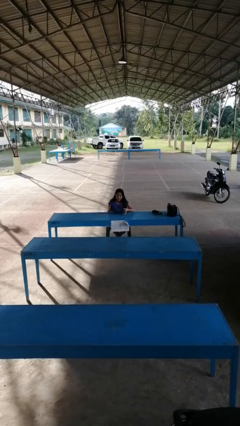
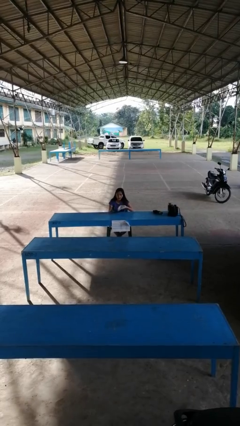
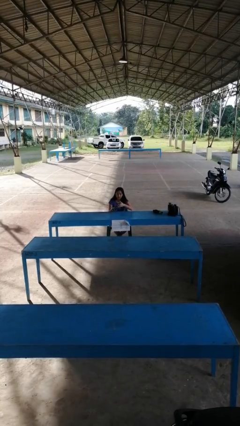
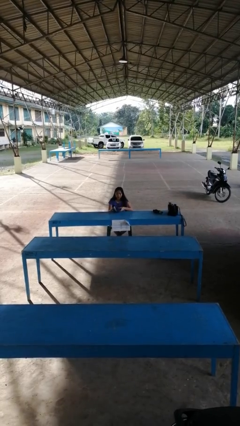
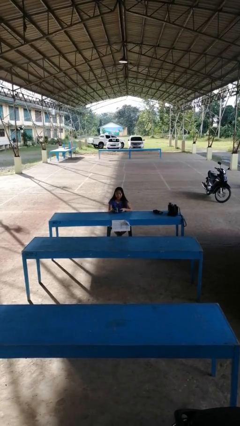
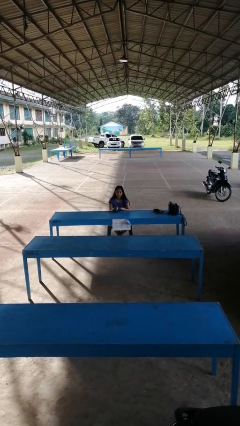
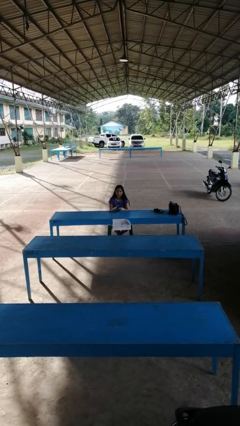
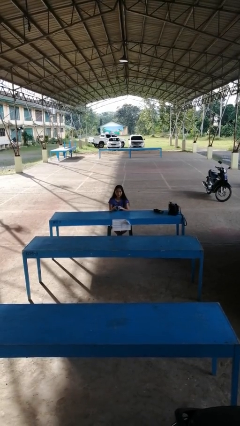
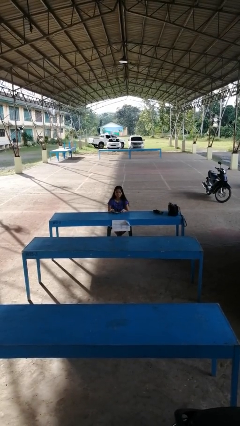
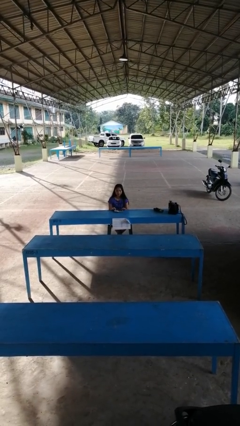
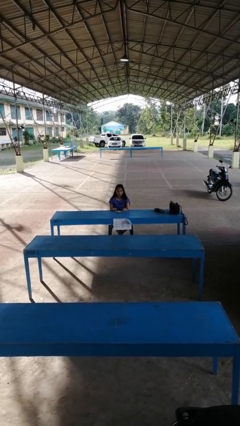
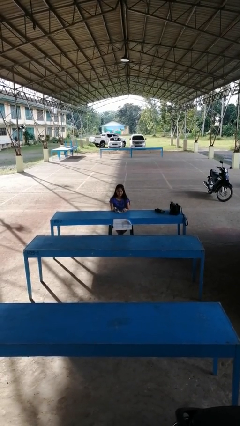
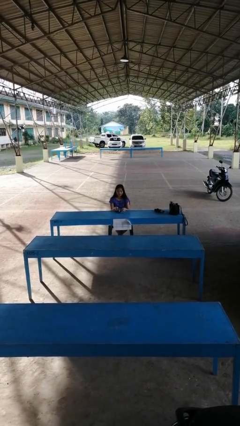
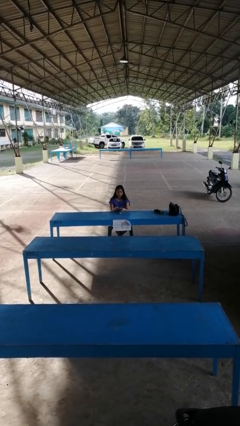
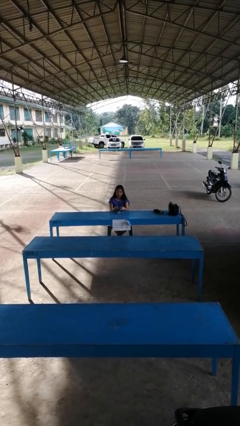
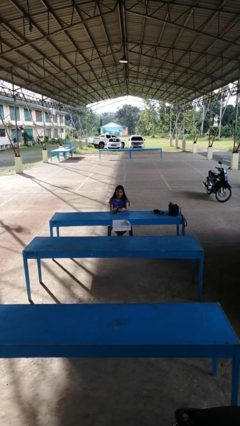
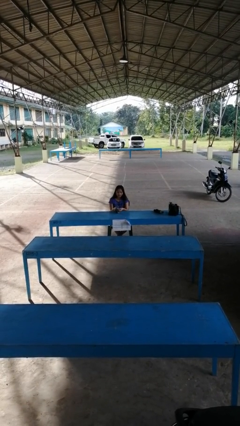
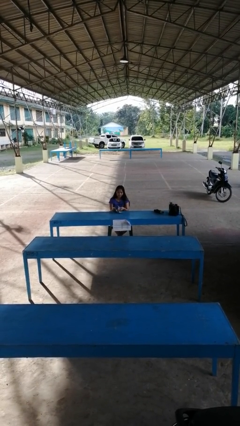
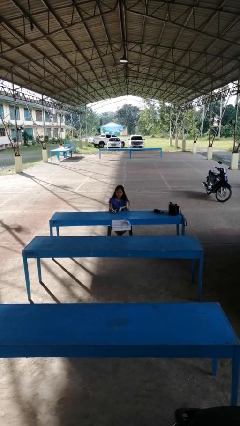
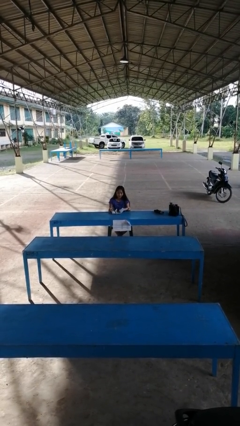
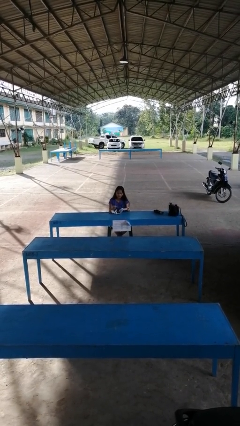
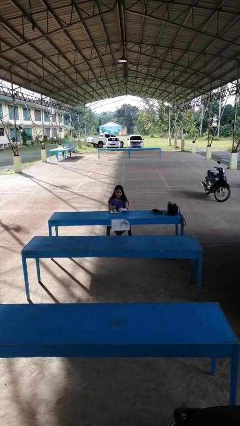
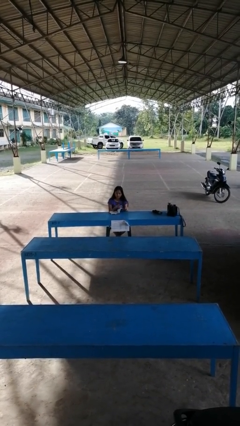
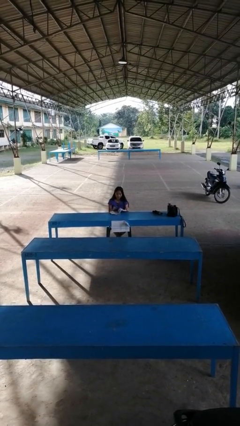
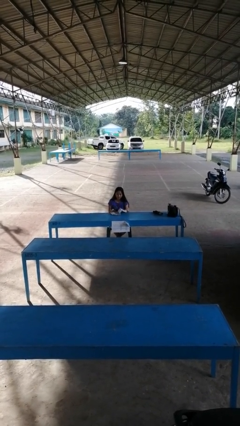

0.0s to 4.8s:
person reads magazine

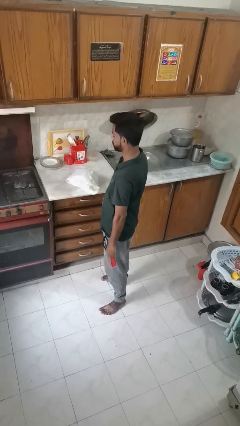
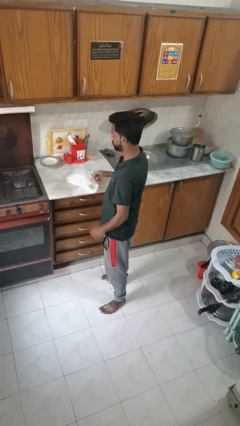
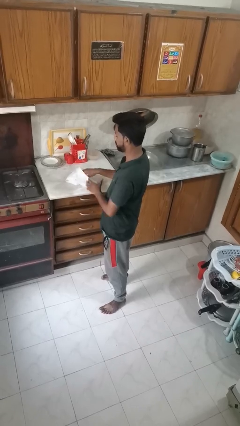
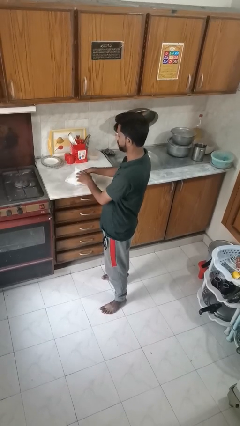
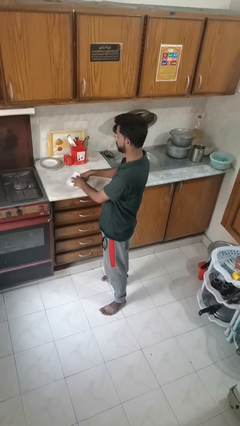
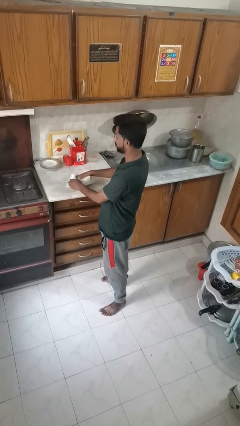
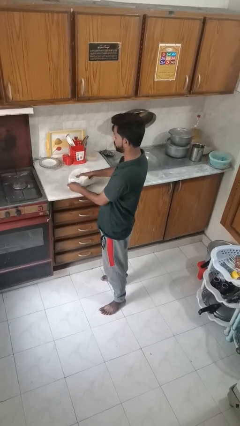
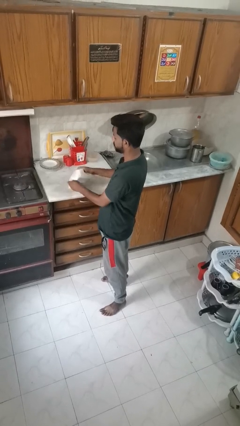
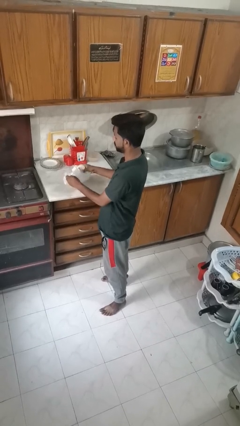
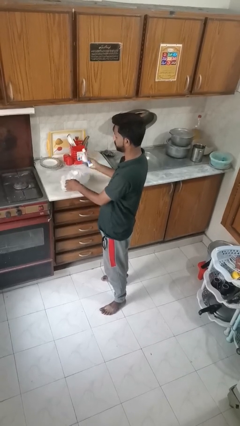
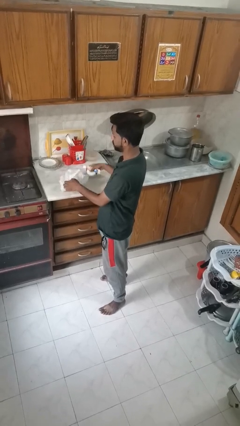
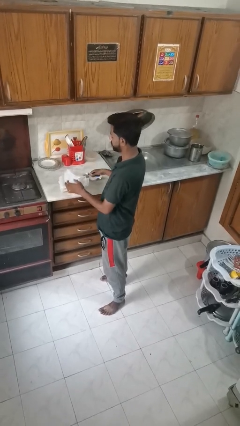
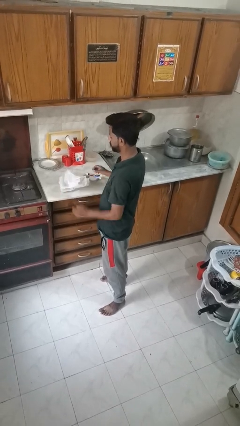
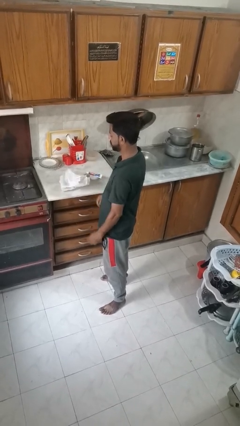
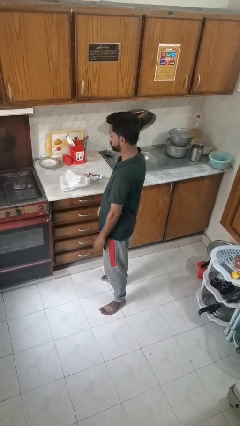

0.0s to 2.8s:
person takes object from bag

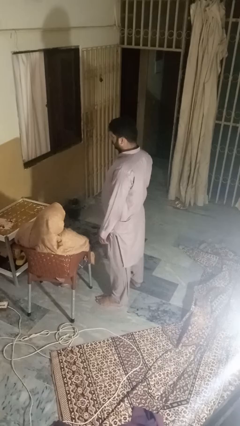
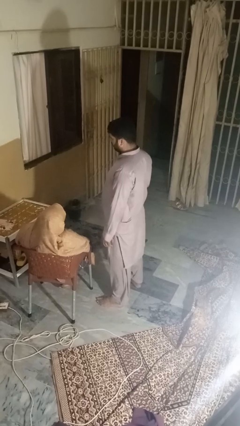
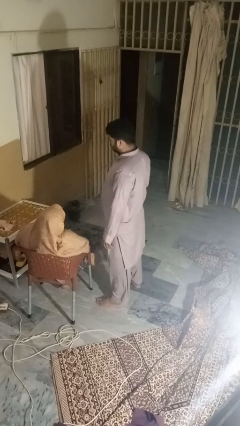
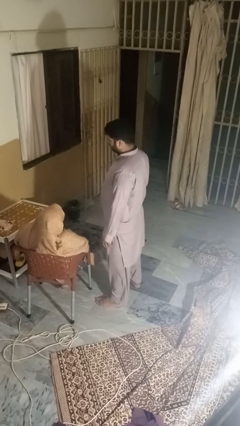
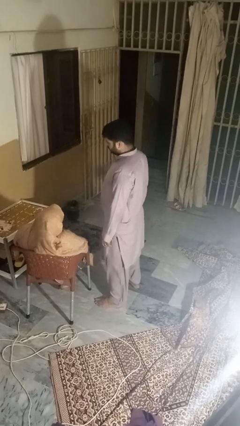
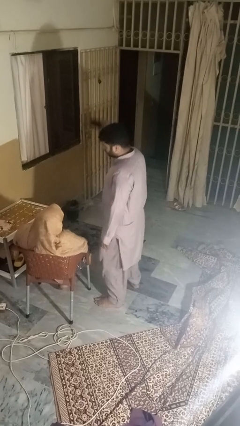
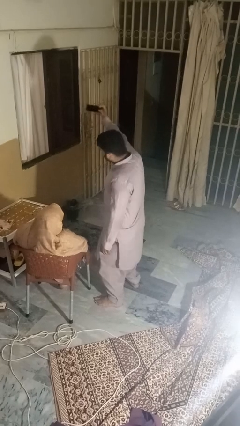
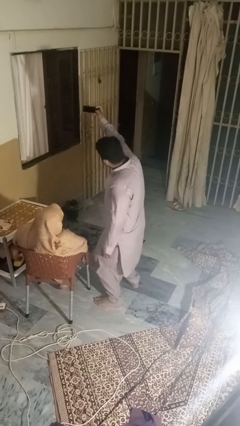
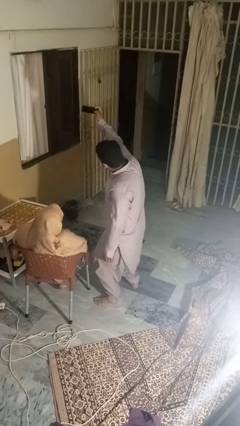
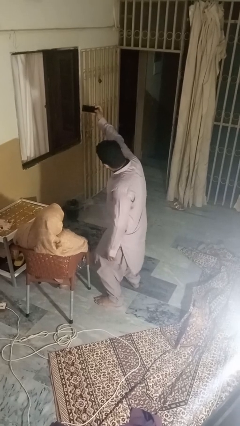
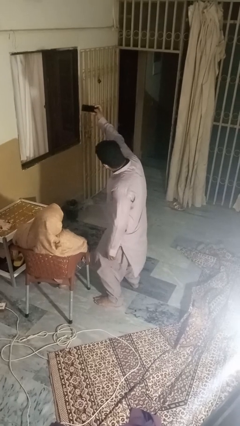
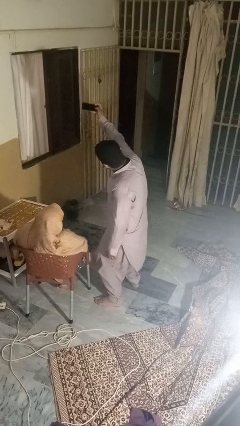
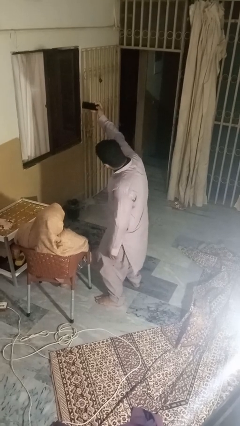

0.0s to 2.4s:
person takes selfie with person

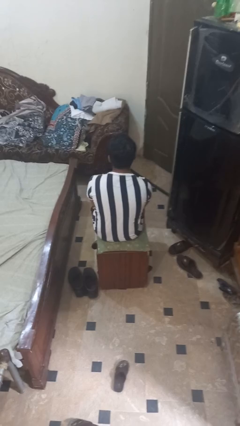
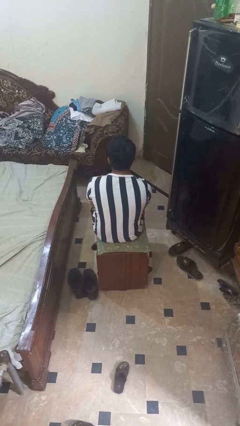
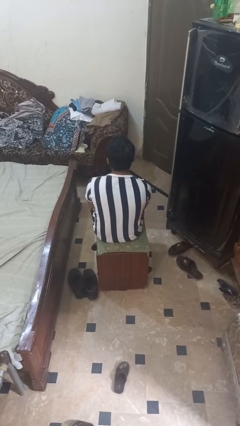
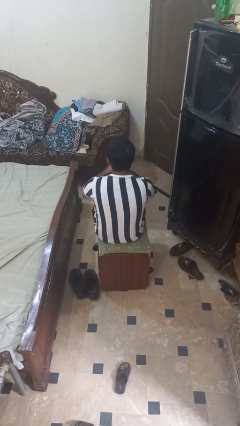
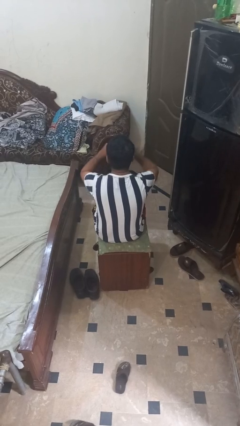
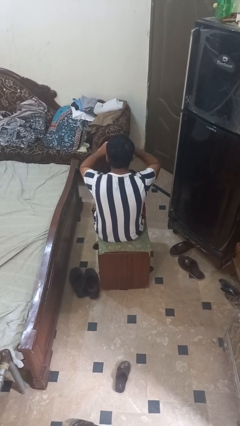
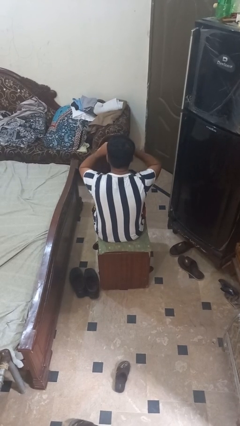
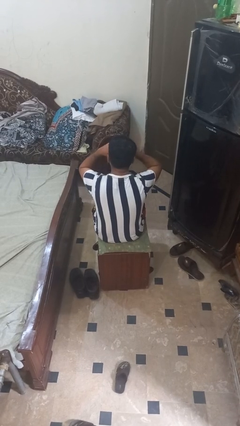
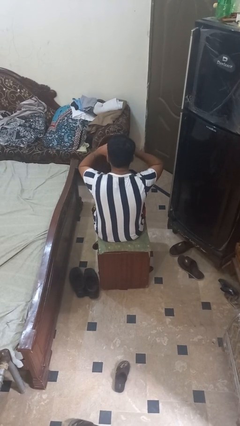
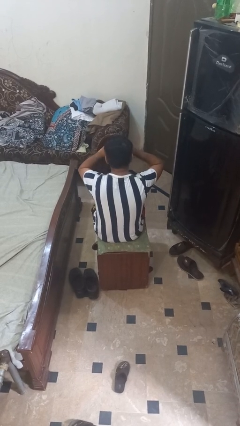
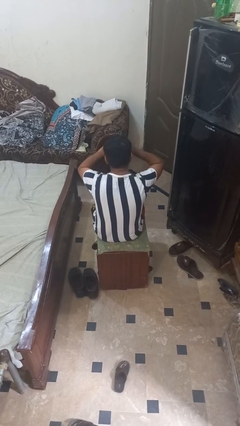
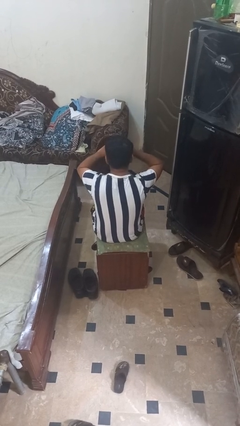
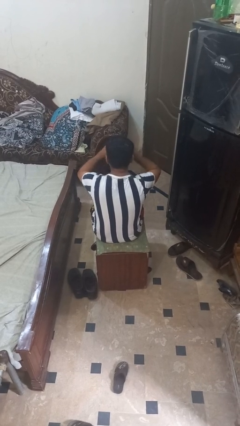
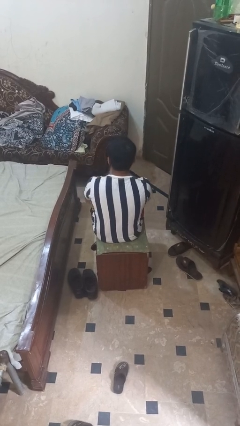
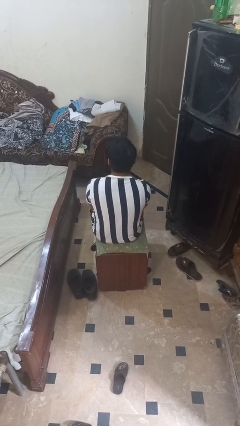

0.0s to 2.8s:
person rubs eyes

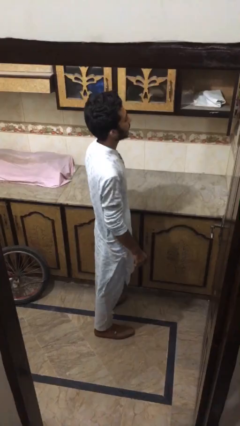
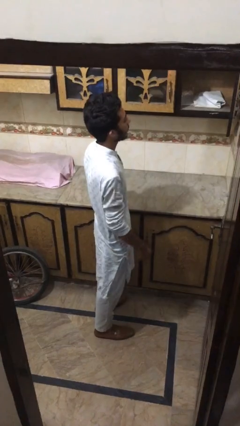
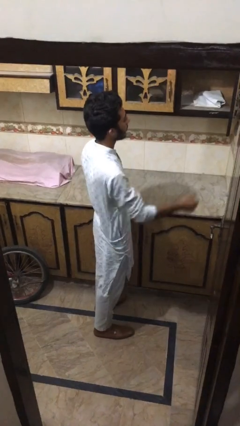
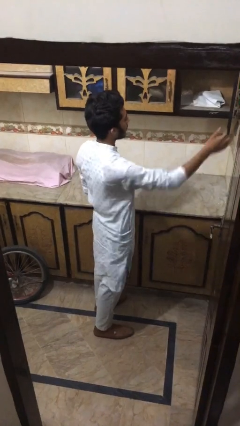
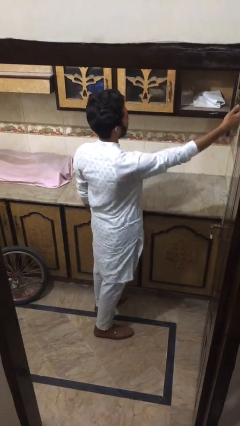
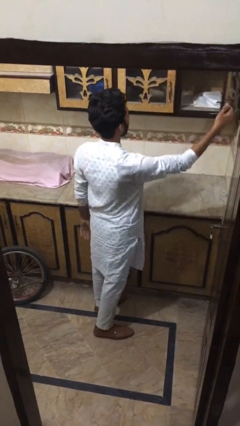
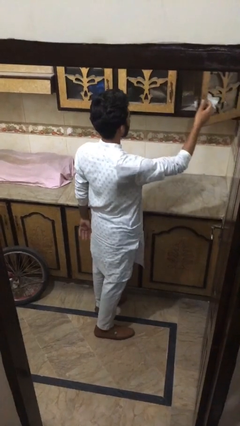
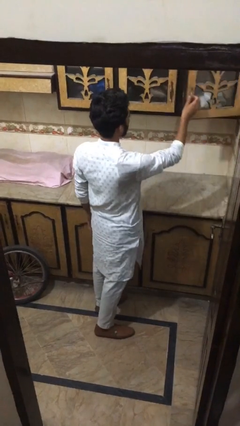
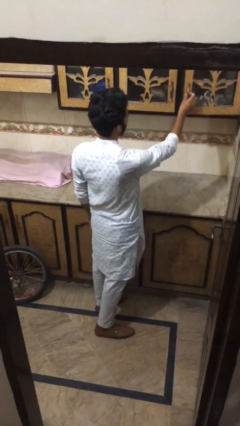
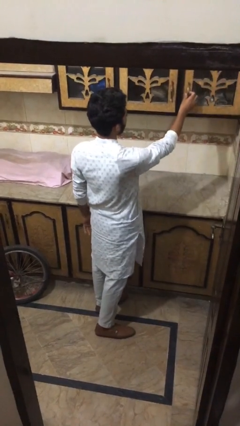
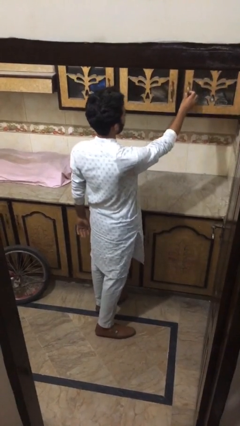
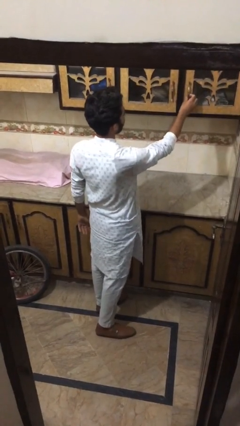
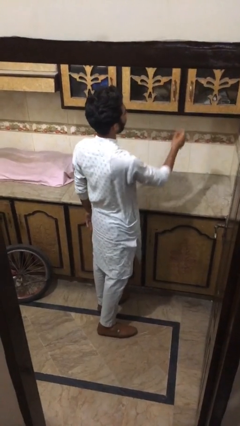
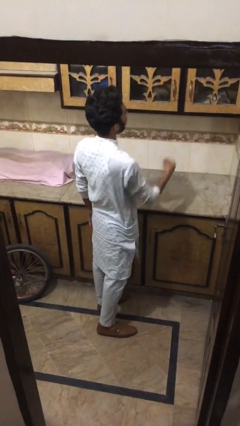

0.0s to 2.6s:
person closes cabinet

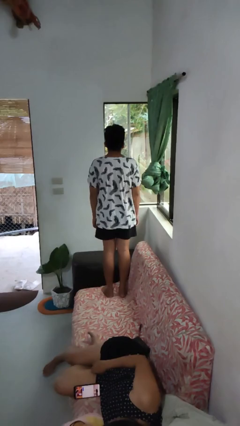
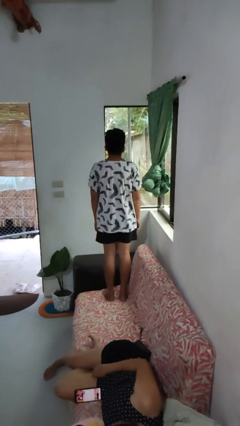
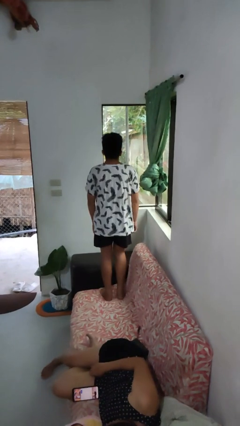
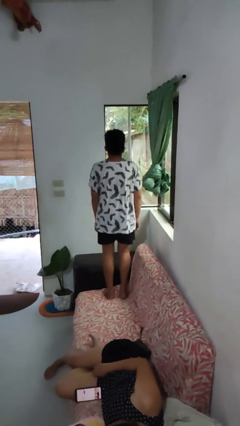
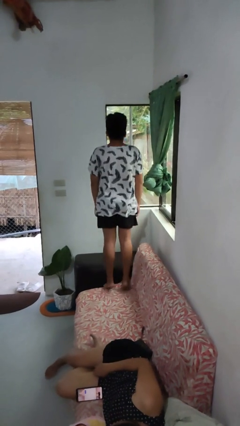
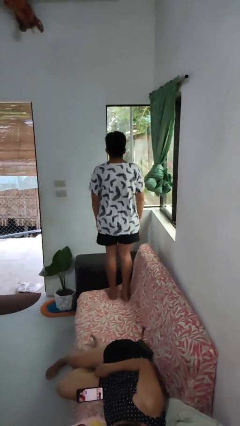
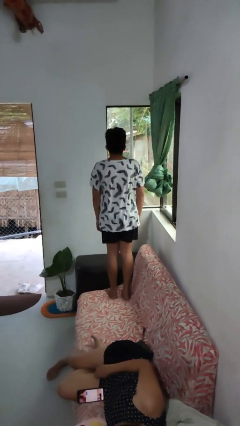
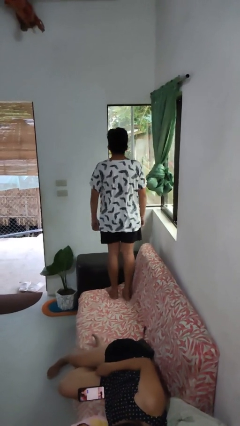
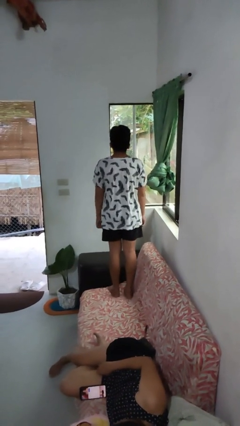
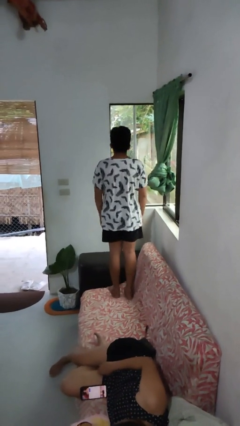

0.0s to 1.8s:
person jumps on couch
